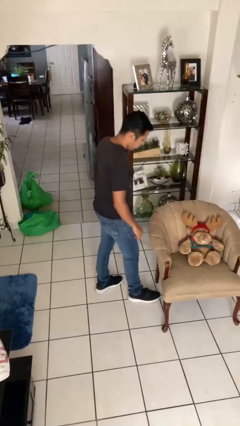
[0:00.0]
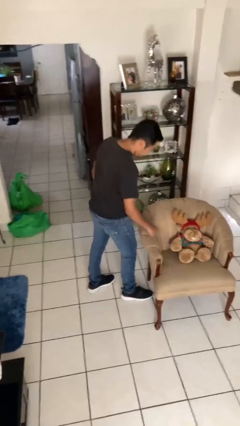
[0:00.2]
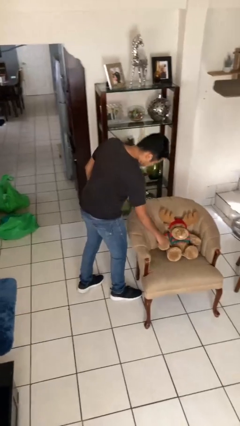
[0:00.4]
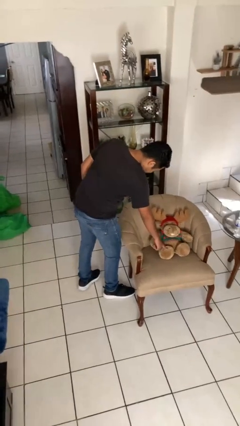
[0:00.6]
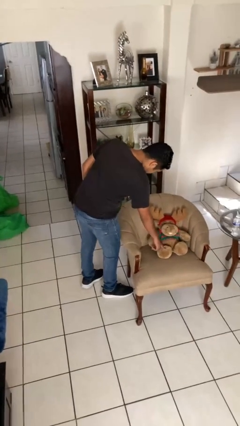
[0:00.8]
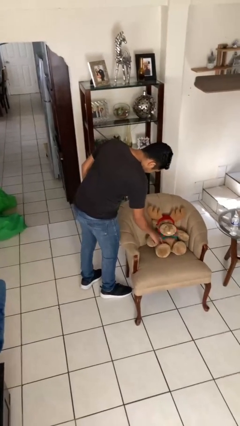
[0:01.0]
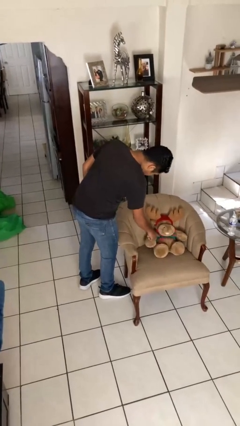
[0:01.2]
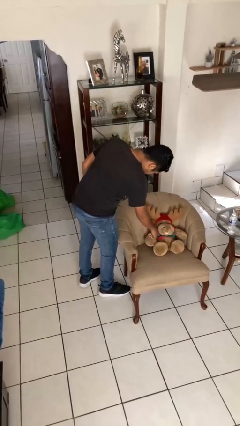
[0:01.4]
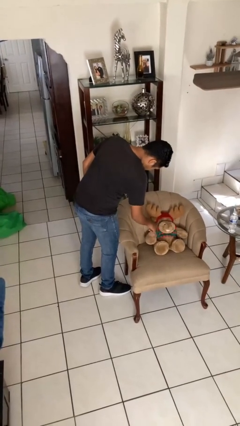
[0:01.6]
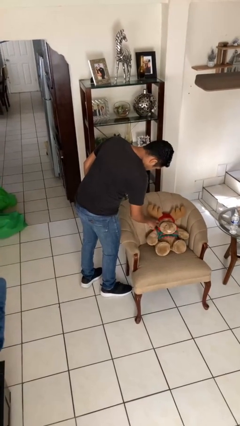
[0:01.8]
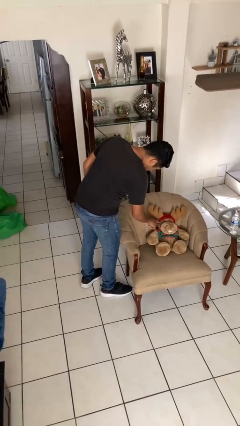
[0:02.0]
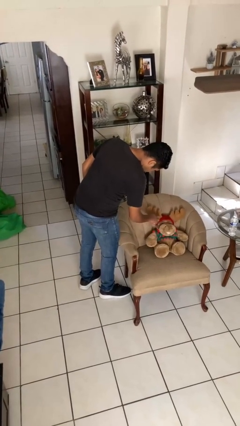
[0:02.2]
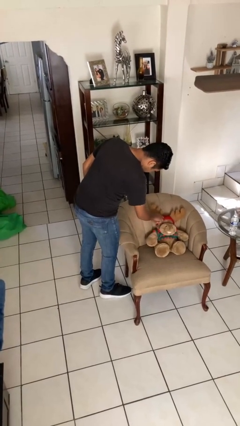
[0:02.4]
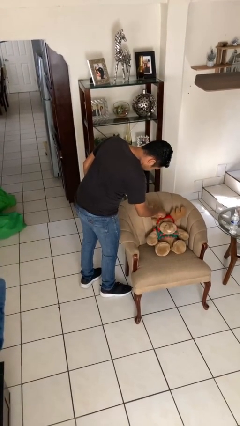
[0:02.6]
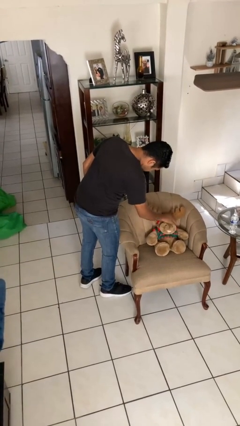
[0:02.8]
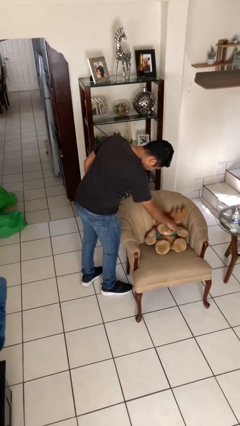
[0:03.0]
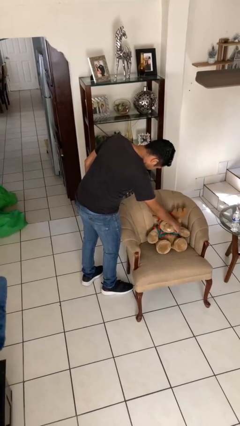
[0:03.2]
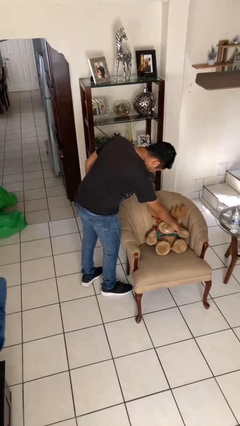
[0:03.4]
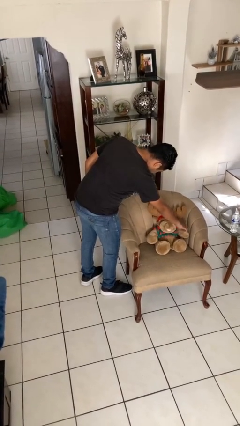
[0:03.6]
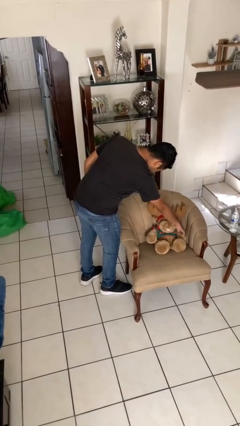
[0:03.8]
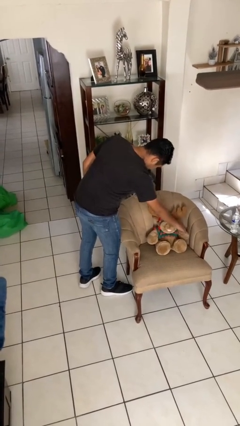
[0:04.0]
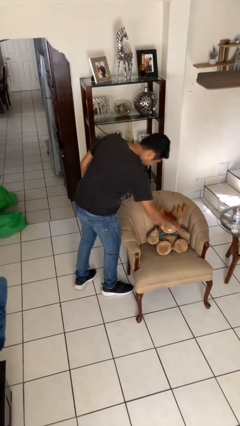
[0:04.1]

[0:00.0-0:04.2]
person taps object with finger

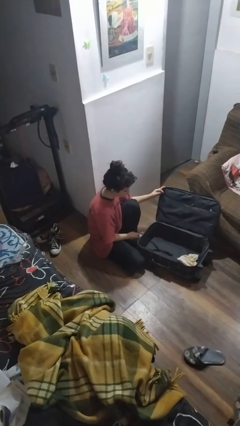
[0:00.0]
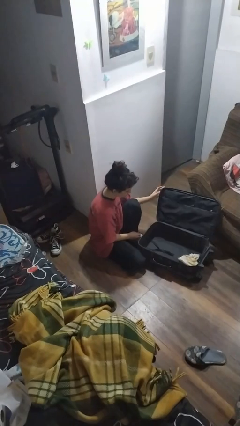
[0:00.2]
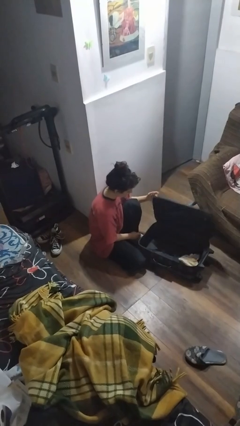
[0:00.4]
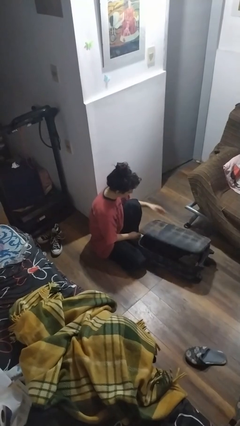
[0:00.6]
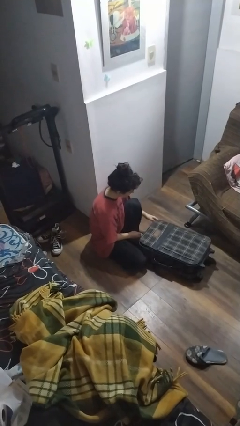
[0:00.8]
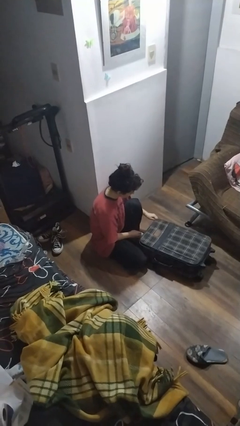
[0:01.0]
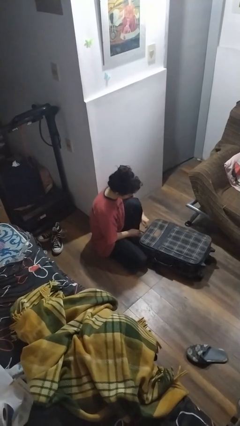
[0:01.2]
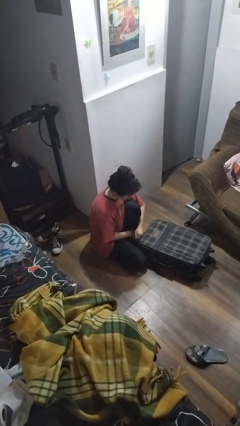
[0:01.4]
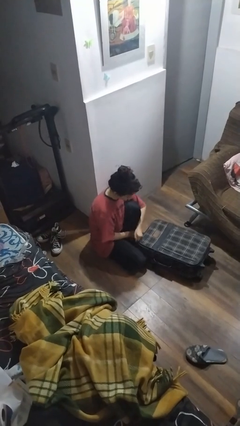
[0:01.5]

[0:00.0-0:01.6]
person closes suitcase

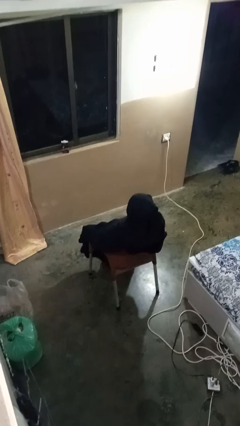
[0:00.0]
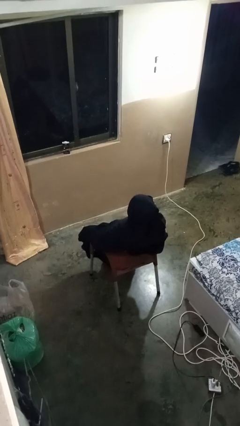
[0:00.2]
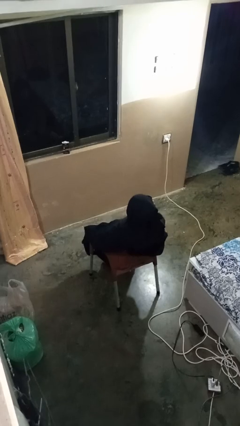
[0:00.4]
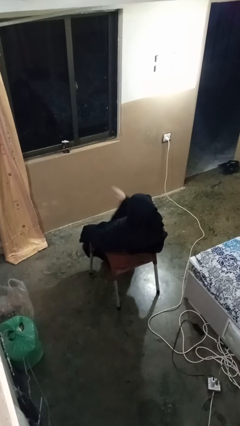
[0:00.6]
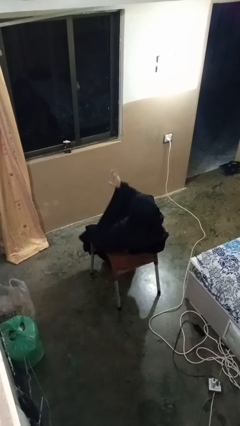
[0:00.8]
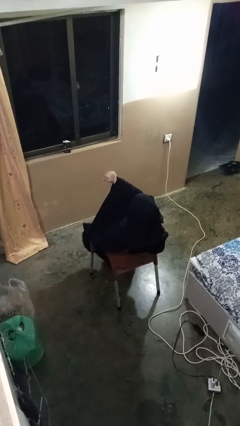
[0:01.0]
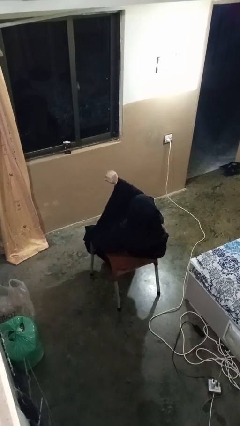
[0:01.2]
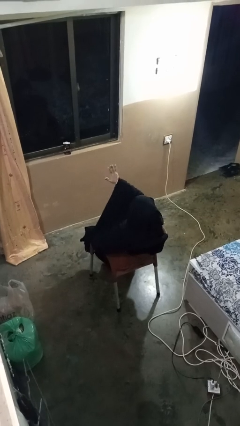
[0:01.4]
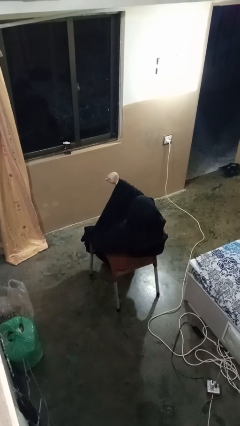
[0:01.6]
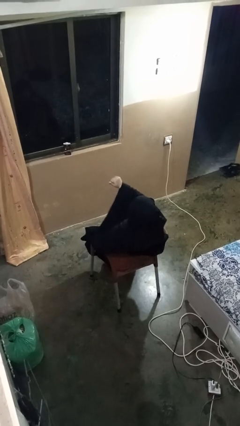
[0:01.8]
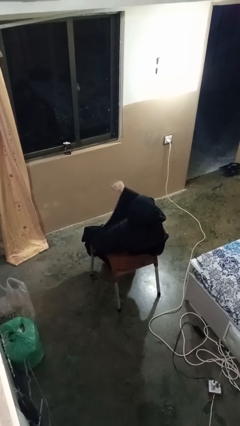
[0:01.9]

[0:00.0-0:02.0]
person gestures come here

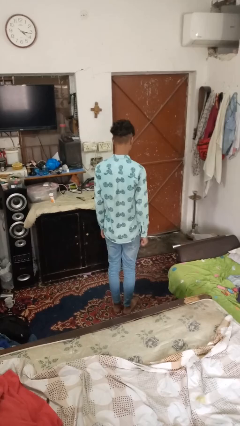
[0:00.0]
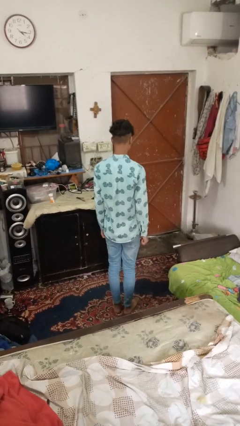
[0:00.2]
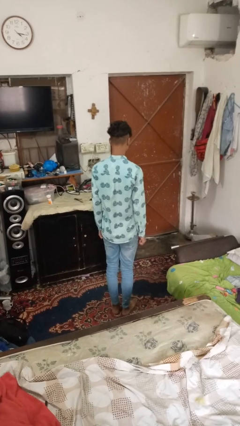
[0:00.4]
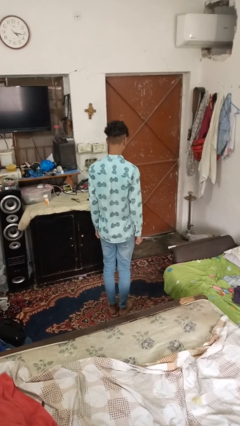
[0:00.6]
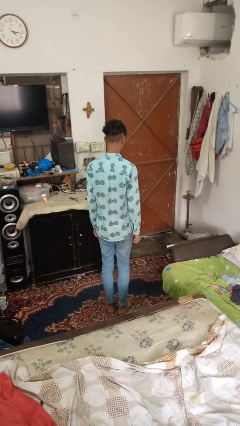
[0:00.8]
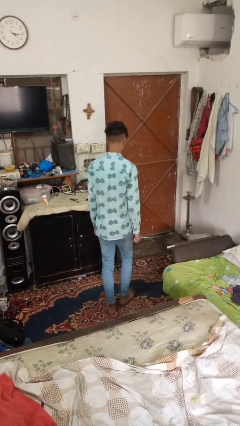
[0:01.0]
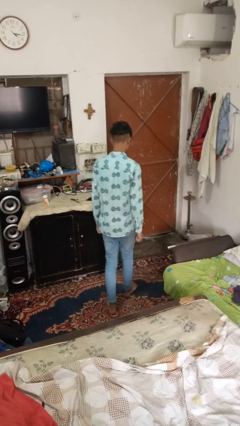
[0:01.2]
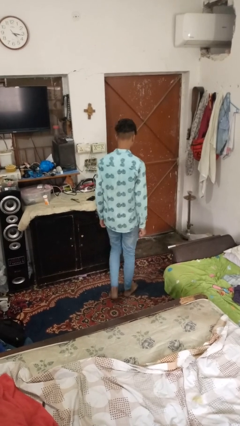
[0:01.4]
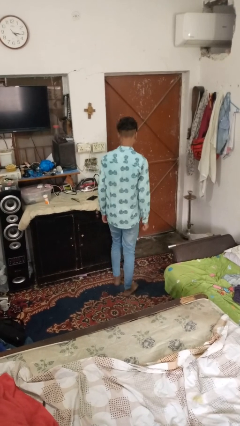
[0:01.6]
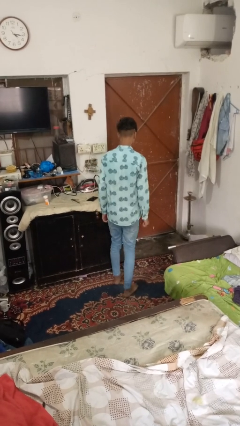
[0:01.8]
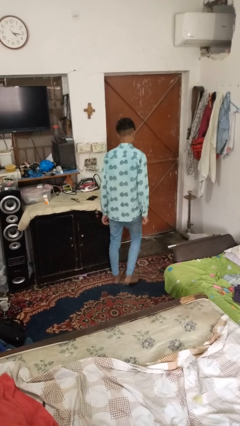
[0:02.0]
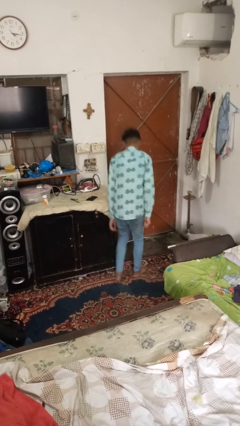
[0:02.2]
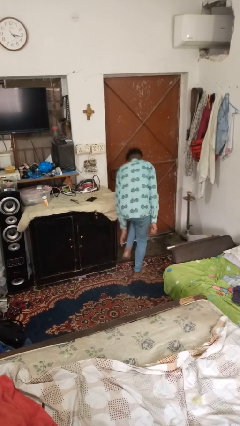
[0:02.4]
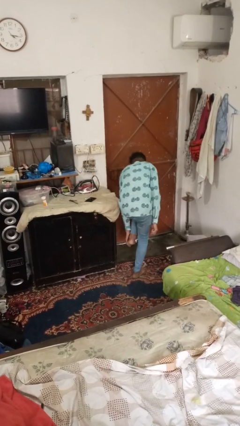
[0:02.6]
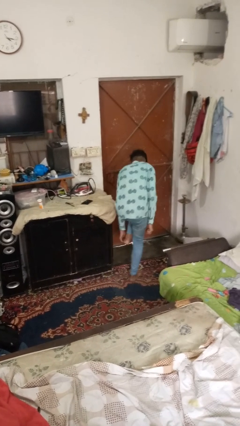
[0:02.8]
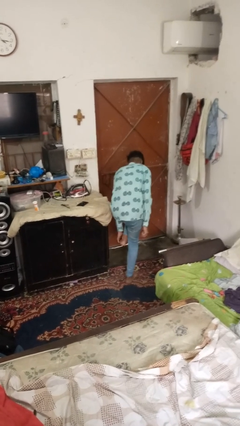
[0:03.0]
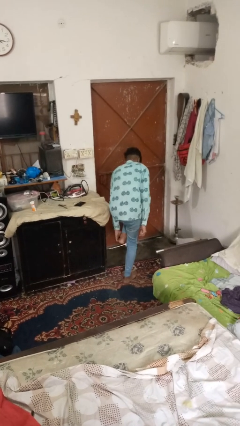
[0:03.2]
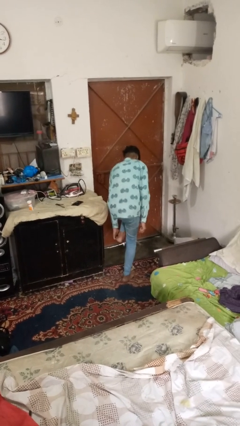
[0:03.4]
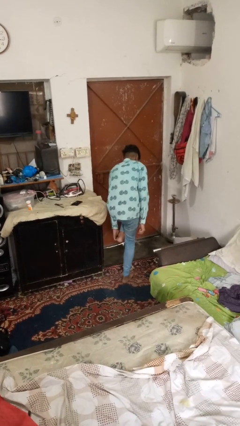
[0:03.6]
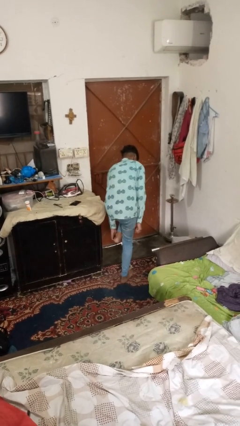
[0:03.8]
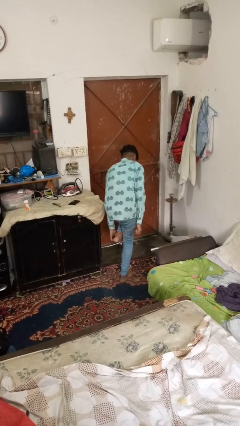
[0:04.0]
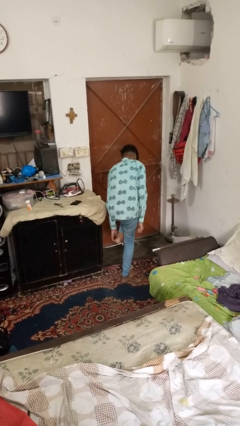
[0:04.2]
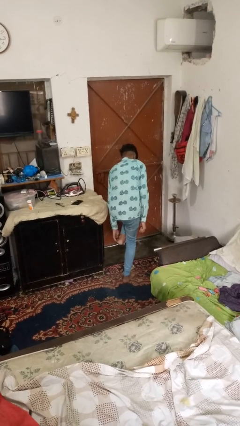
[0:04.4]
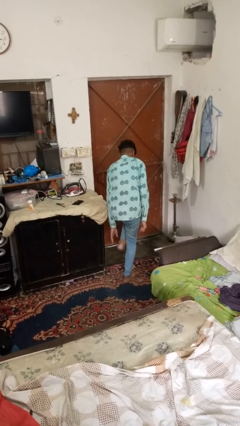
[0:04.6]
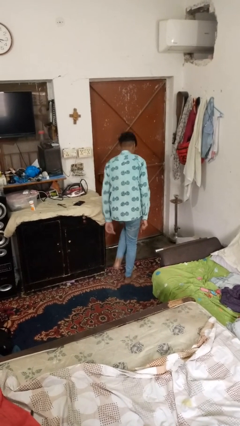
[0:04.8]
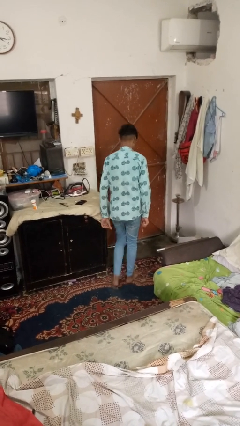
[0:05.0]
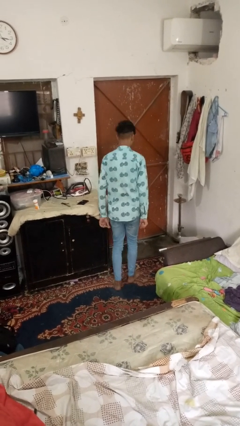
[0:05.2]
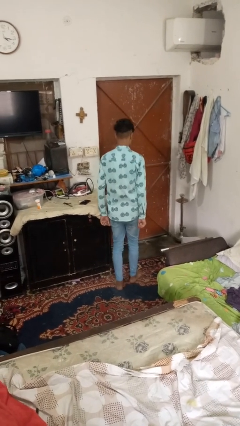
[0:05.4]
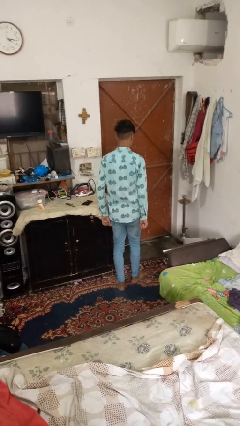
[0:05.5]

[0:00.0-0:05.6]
person stubs toe

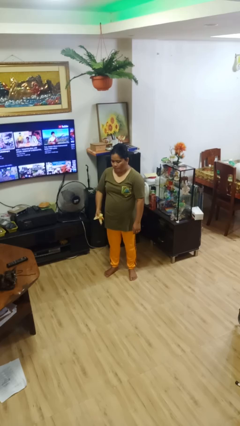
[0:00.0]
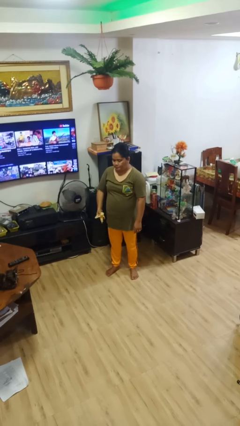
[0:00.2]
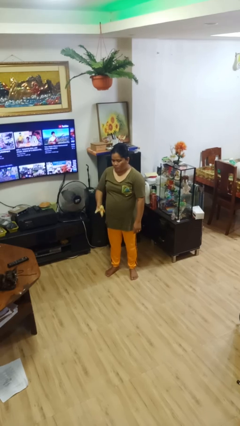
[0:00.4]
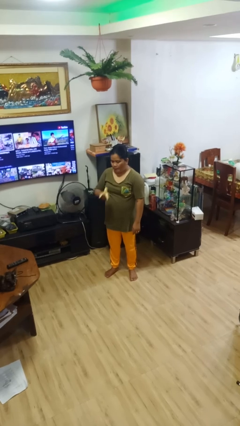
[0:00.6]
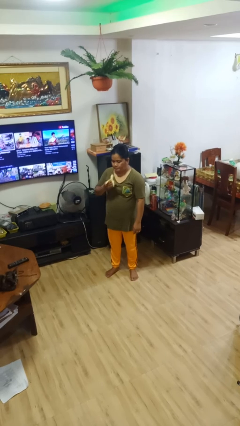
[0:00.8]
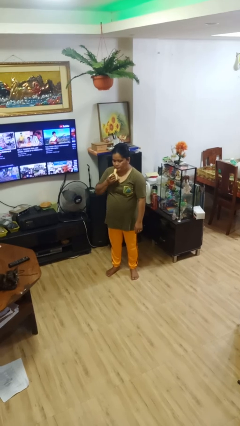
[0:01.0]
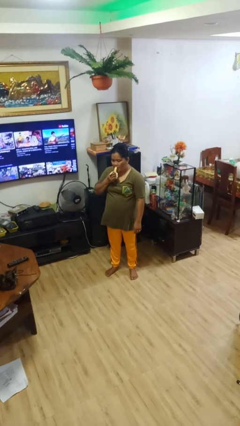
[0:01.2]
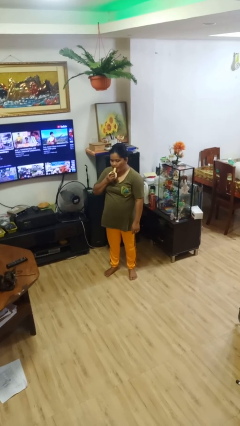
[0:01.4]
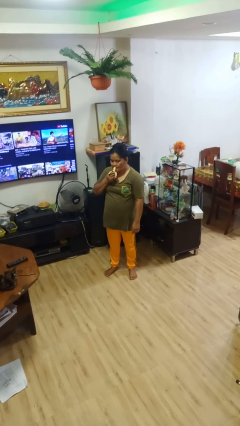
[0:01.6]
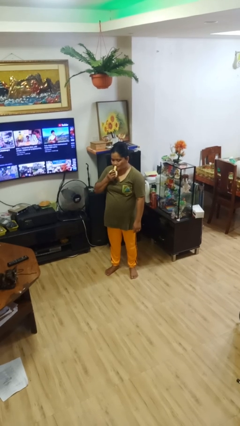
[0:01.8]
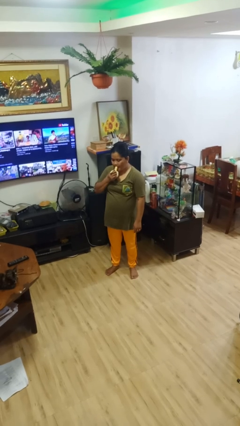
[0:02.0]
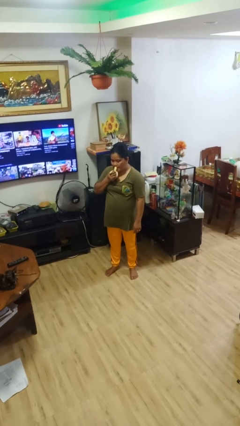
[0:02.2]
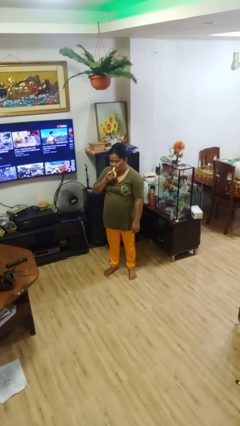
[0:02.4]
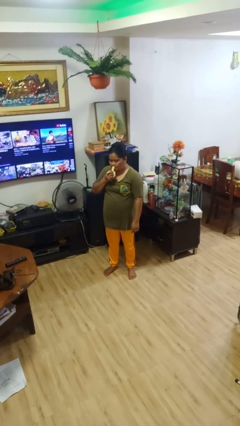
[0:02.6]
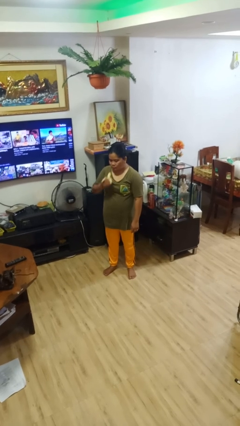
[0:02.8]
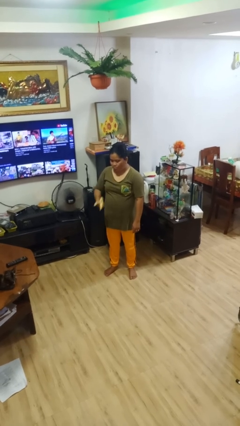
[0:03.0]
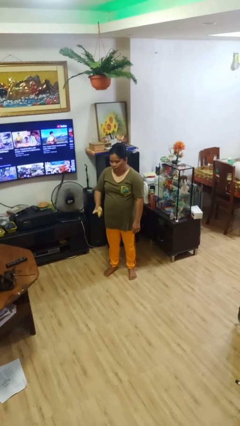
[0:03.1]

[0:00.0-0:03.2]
person eats banana

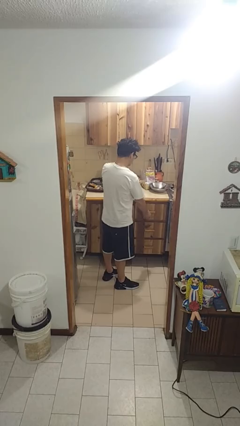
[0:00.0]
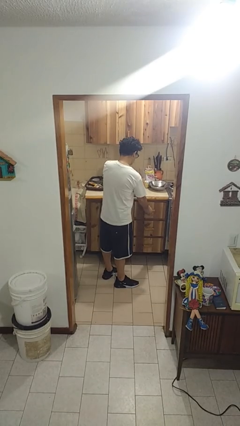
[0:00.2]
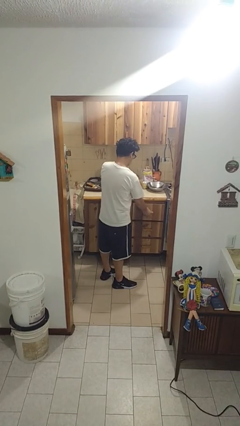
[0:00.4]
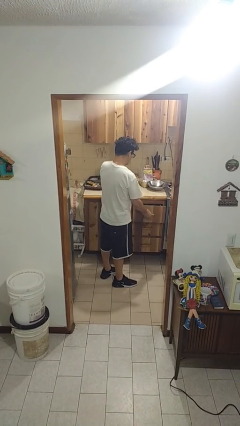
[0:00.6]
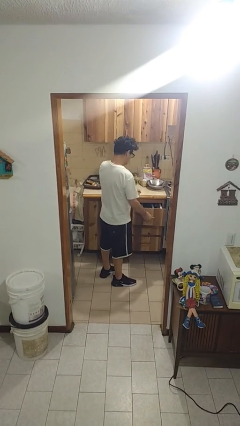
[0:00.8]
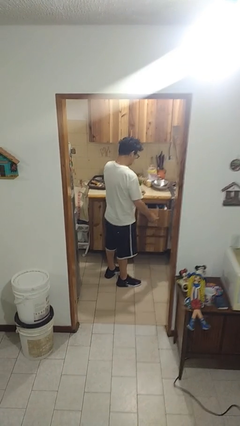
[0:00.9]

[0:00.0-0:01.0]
person opens kitchen drawer
